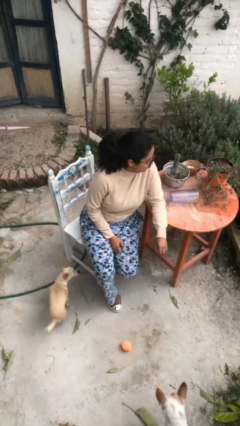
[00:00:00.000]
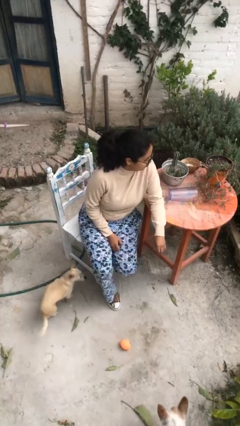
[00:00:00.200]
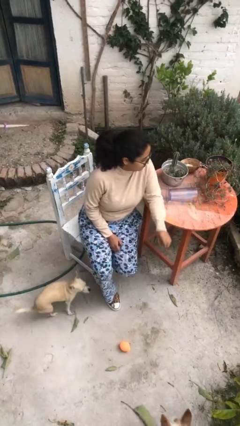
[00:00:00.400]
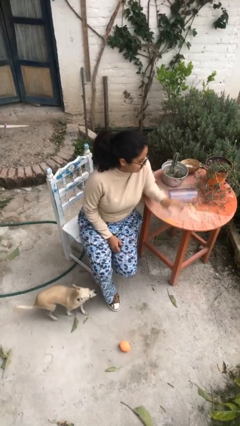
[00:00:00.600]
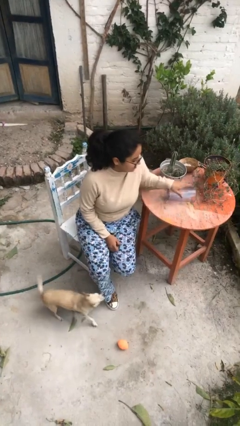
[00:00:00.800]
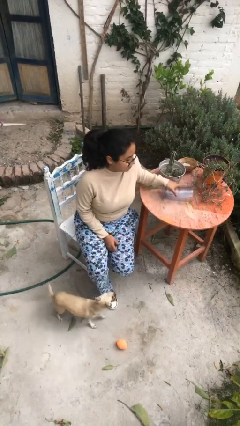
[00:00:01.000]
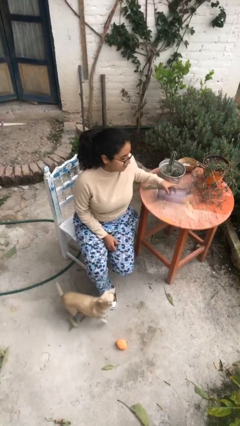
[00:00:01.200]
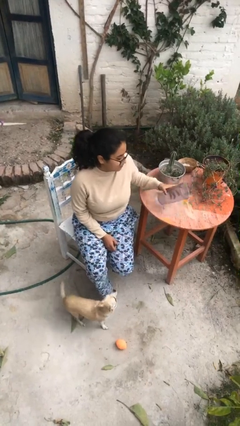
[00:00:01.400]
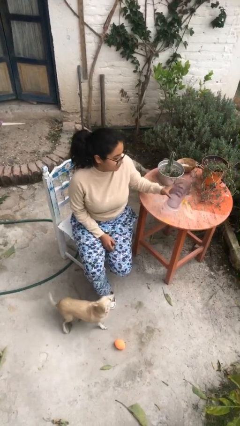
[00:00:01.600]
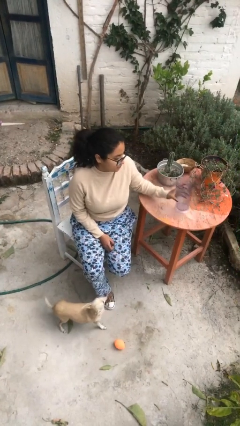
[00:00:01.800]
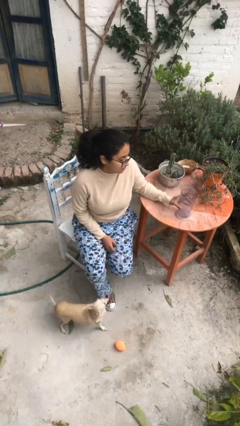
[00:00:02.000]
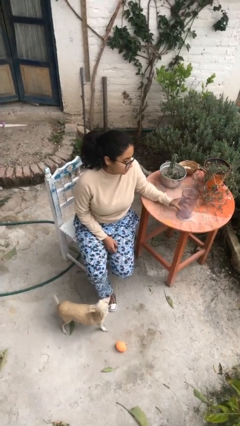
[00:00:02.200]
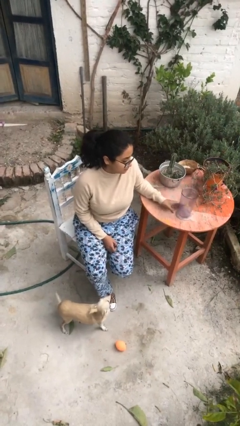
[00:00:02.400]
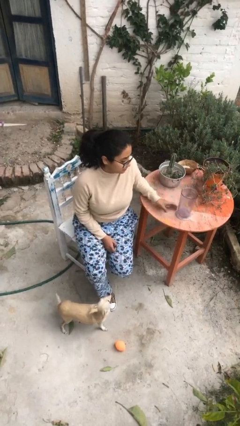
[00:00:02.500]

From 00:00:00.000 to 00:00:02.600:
person sets upright glass

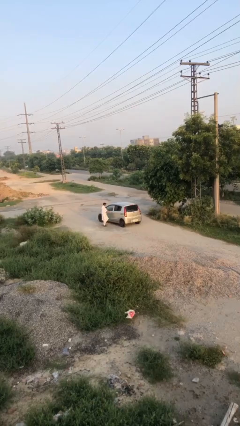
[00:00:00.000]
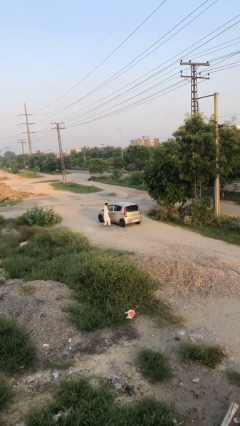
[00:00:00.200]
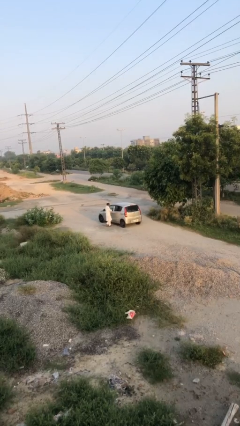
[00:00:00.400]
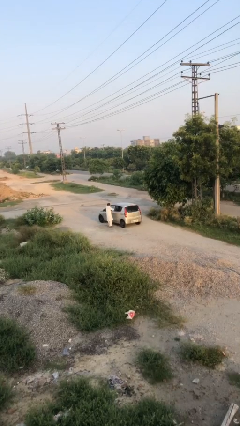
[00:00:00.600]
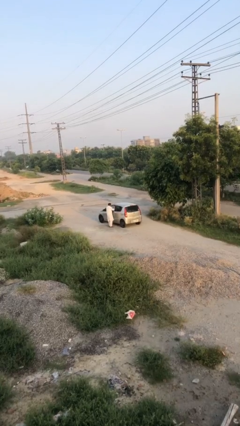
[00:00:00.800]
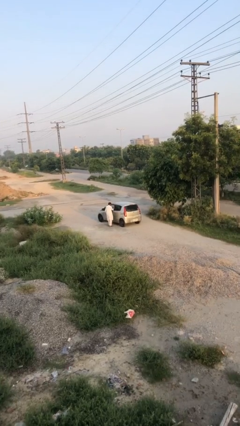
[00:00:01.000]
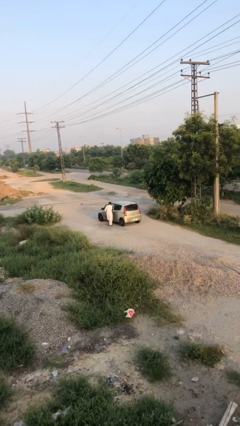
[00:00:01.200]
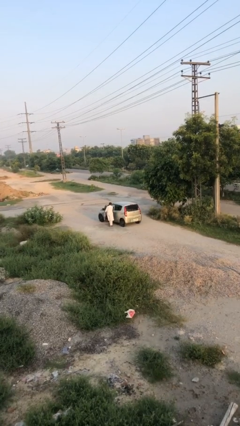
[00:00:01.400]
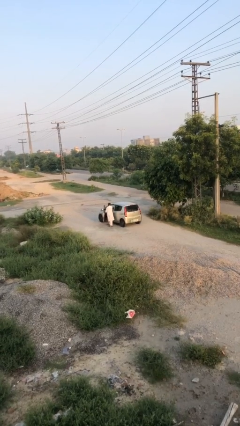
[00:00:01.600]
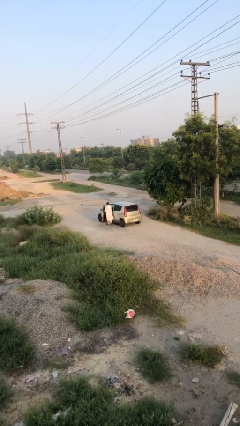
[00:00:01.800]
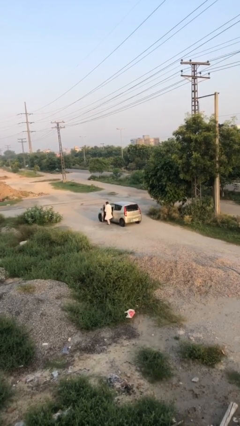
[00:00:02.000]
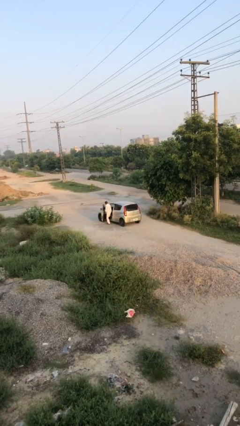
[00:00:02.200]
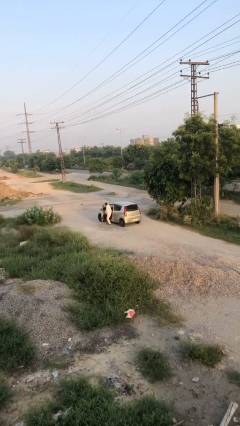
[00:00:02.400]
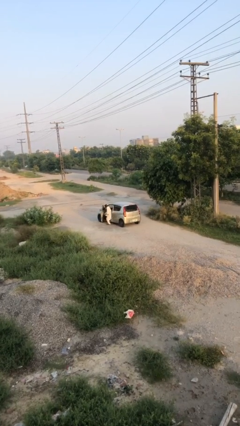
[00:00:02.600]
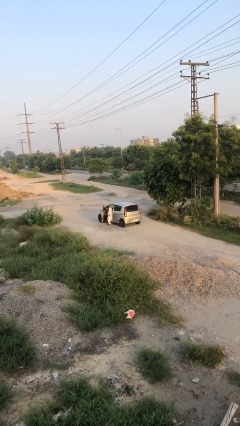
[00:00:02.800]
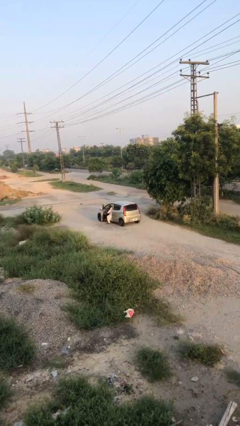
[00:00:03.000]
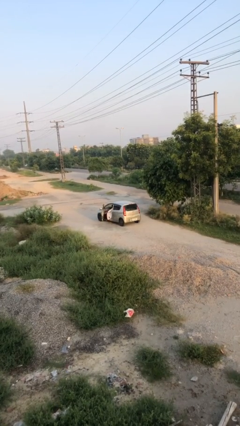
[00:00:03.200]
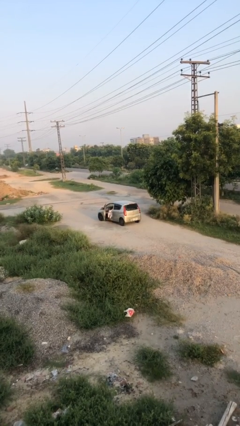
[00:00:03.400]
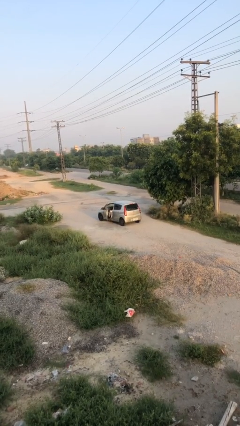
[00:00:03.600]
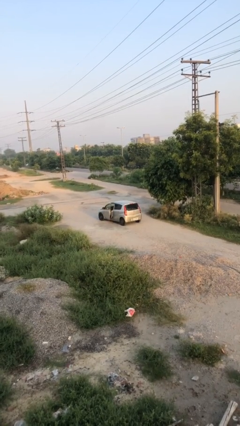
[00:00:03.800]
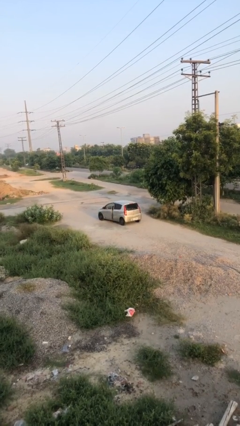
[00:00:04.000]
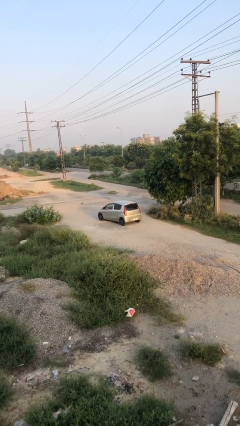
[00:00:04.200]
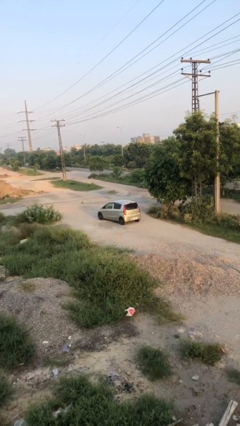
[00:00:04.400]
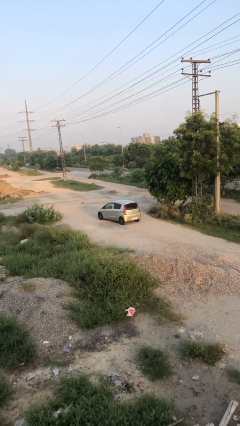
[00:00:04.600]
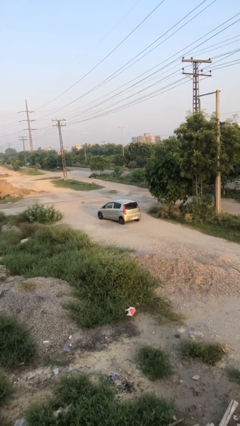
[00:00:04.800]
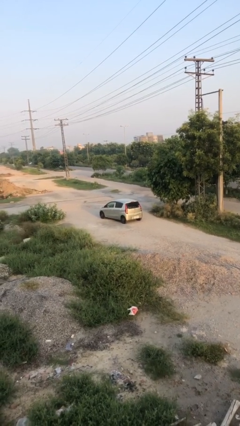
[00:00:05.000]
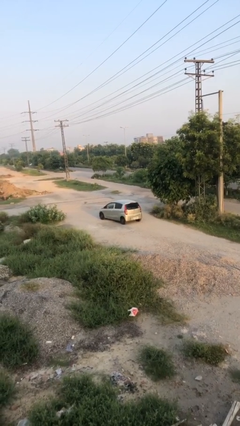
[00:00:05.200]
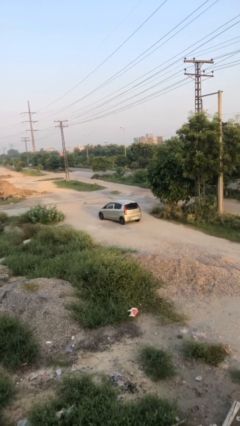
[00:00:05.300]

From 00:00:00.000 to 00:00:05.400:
car picks up person

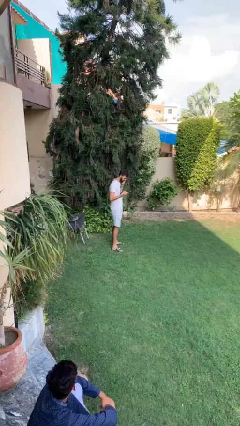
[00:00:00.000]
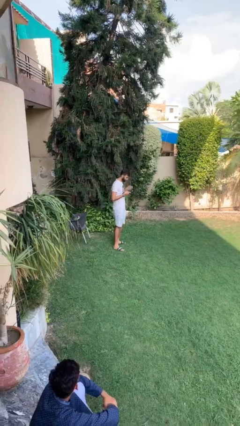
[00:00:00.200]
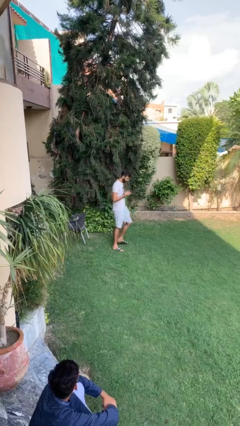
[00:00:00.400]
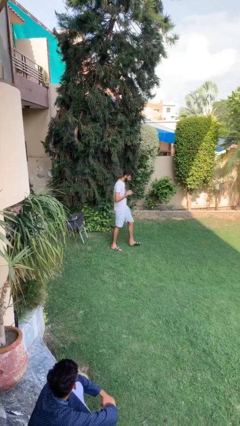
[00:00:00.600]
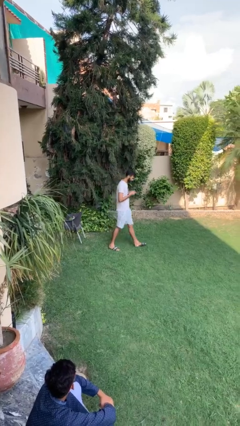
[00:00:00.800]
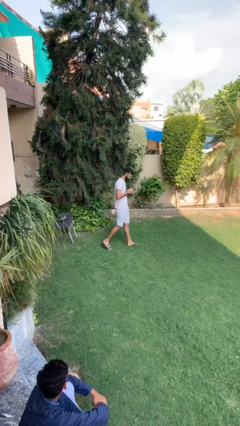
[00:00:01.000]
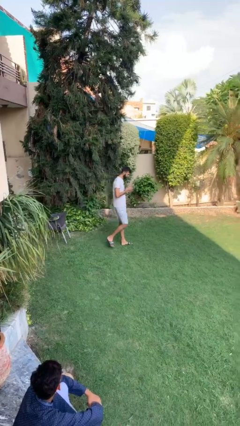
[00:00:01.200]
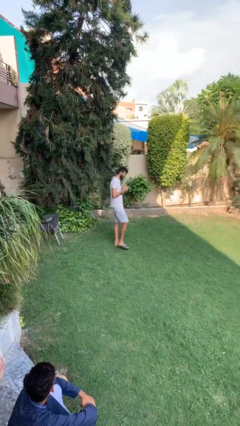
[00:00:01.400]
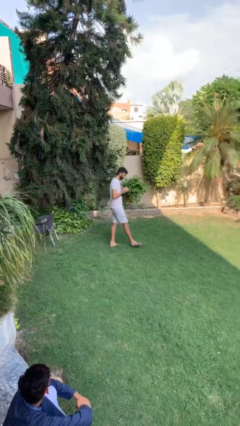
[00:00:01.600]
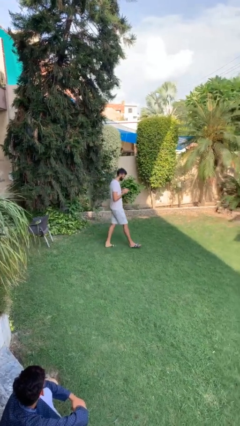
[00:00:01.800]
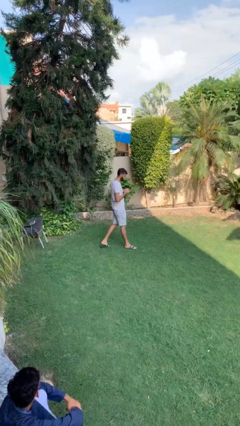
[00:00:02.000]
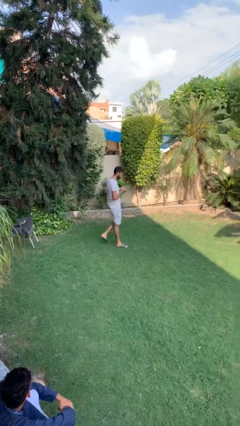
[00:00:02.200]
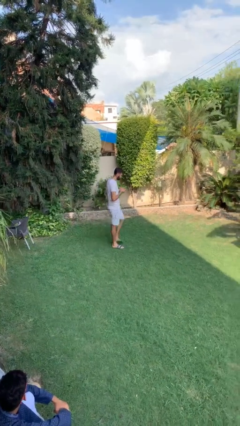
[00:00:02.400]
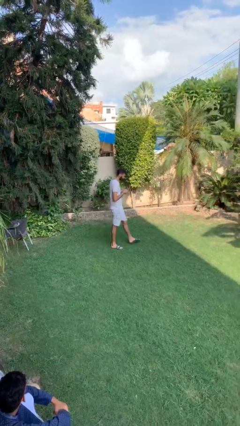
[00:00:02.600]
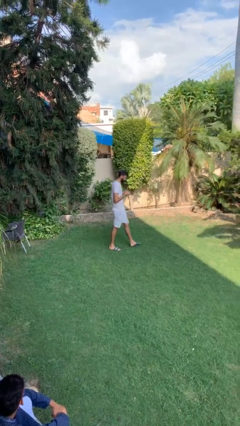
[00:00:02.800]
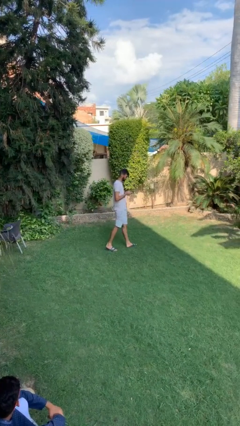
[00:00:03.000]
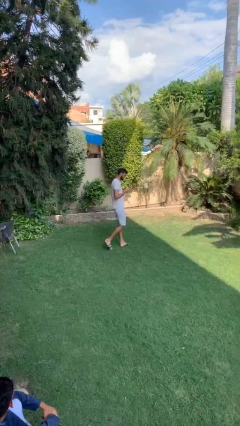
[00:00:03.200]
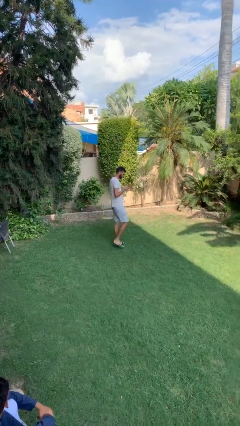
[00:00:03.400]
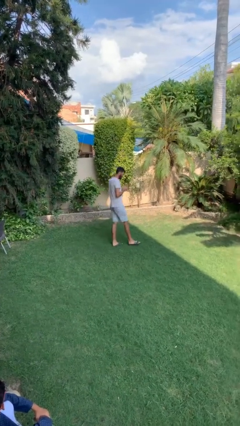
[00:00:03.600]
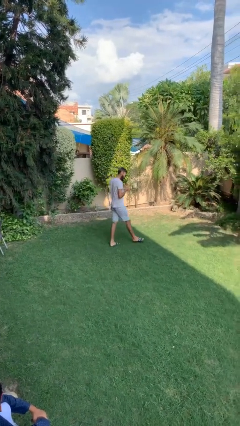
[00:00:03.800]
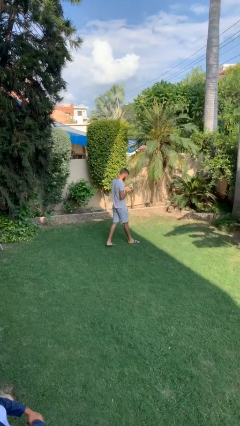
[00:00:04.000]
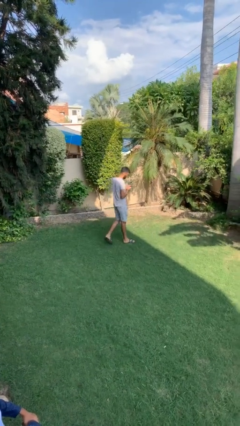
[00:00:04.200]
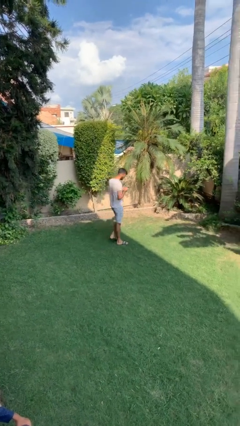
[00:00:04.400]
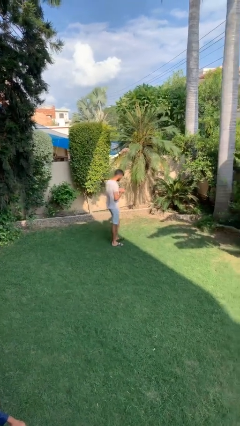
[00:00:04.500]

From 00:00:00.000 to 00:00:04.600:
person texts on phone

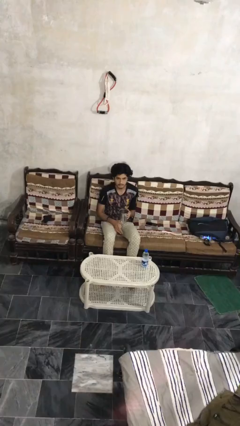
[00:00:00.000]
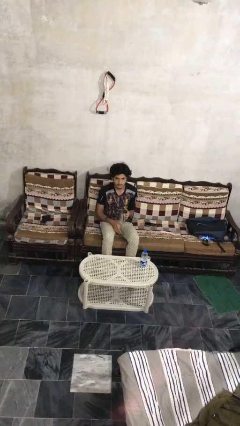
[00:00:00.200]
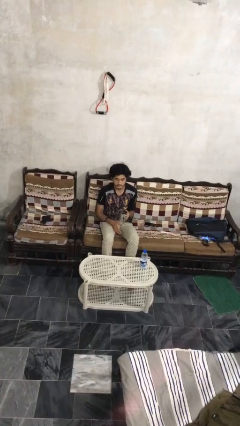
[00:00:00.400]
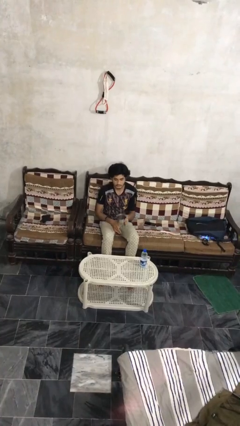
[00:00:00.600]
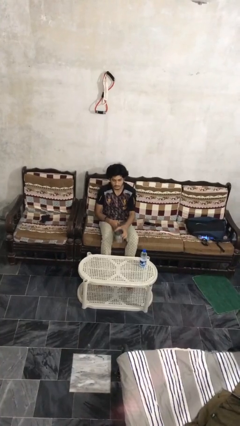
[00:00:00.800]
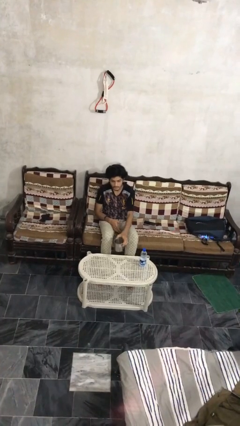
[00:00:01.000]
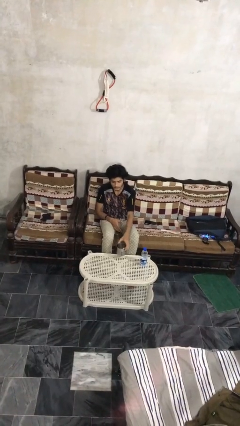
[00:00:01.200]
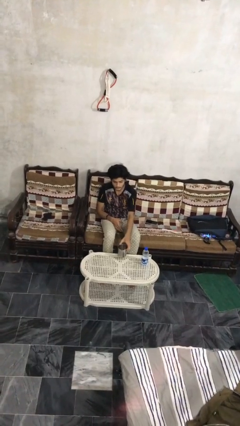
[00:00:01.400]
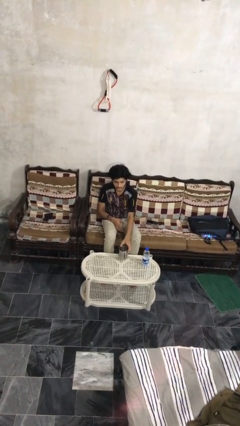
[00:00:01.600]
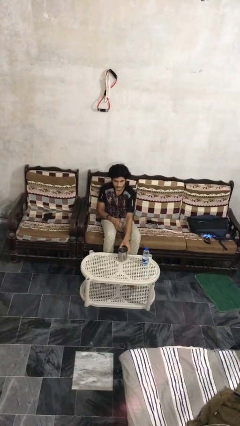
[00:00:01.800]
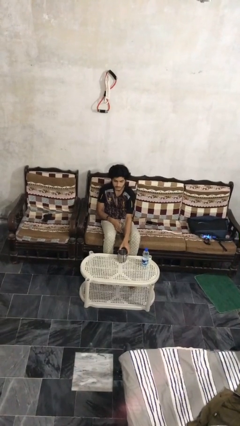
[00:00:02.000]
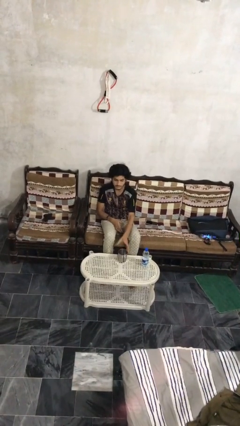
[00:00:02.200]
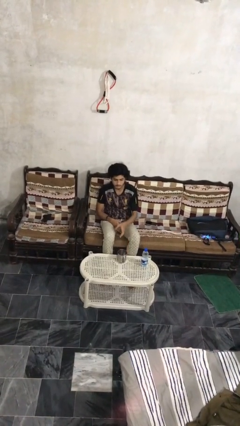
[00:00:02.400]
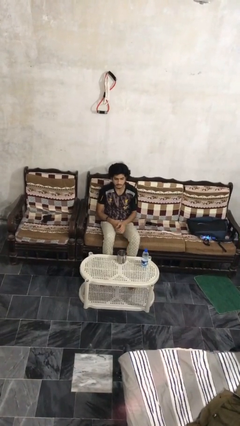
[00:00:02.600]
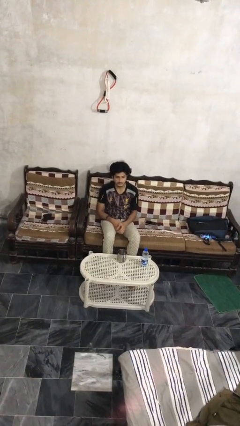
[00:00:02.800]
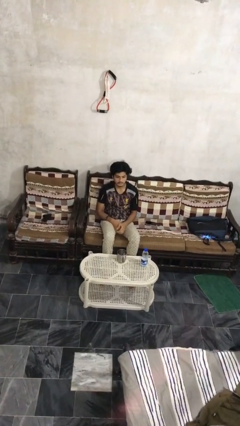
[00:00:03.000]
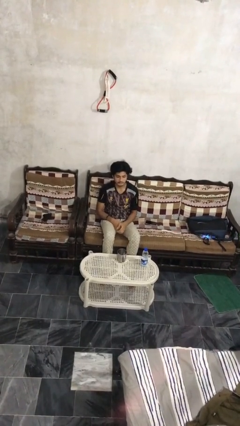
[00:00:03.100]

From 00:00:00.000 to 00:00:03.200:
person puts down object on table

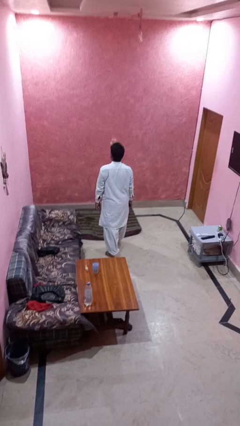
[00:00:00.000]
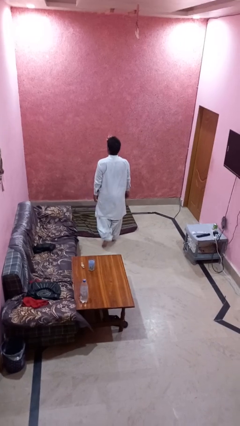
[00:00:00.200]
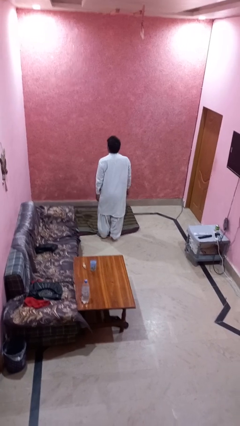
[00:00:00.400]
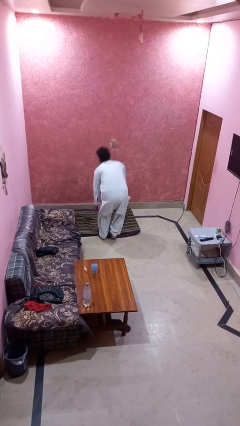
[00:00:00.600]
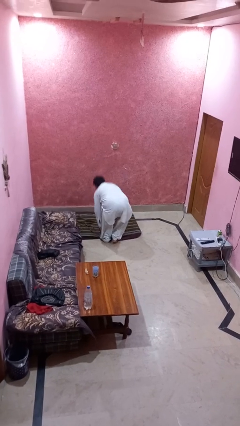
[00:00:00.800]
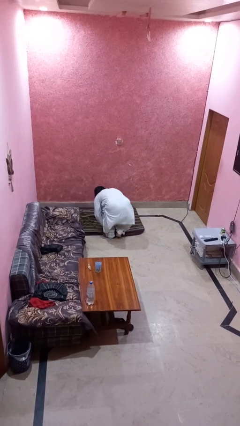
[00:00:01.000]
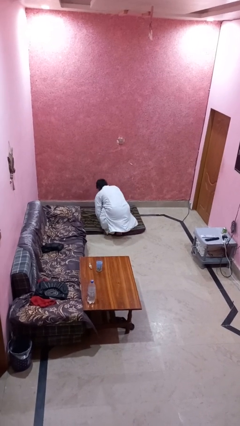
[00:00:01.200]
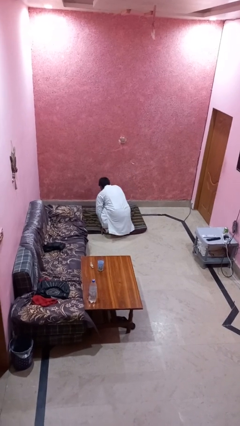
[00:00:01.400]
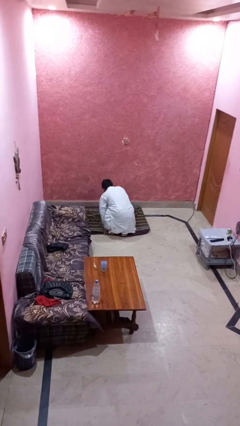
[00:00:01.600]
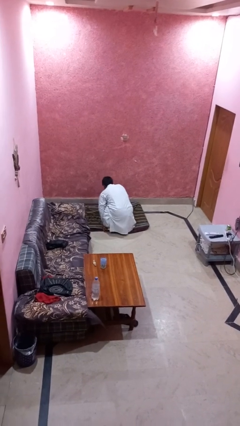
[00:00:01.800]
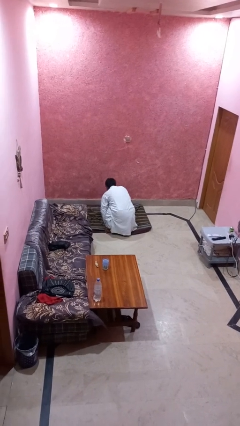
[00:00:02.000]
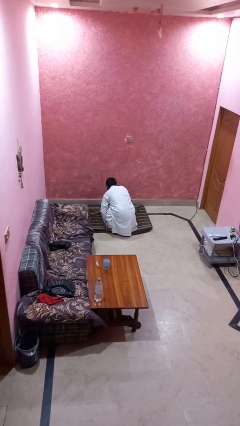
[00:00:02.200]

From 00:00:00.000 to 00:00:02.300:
person trips on object on floor
